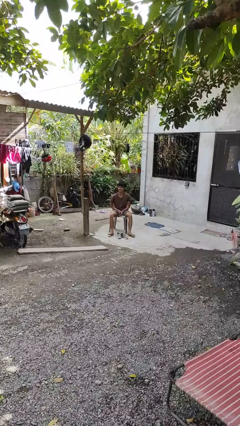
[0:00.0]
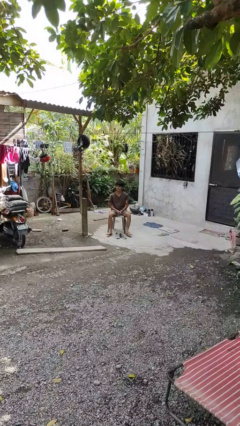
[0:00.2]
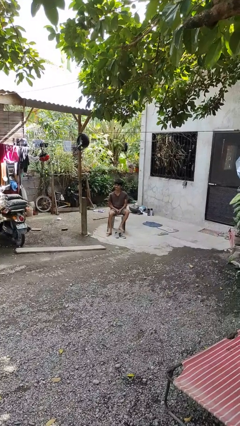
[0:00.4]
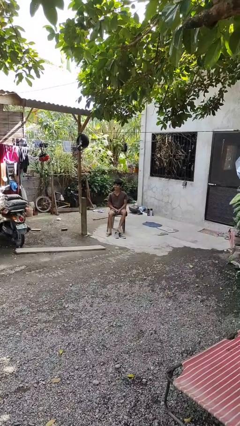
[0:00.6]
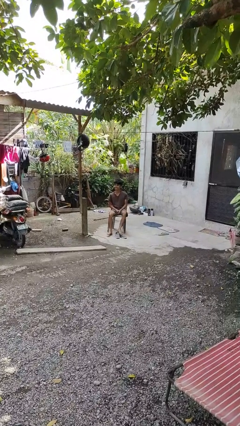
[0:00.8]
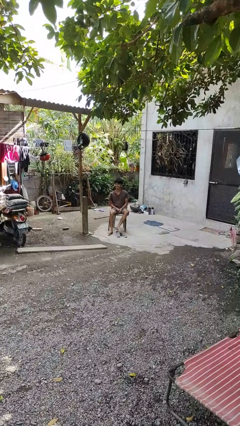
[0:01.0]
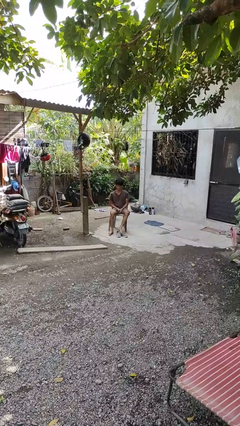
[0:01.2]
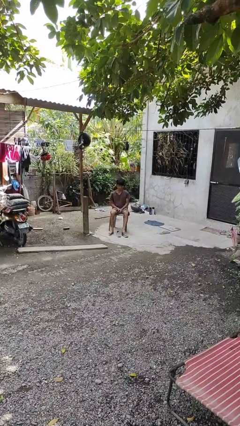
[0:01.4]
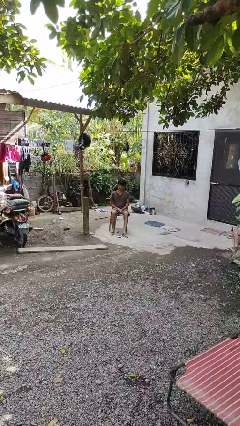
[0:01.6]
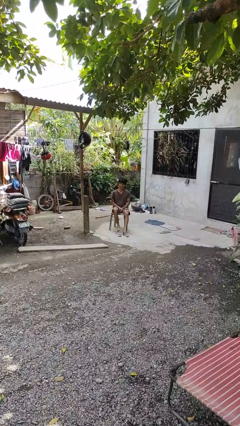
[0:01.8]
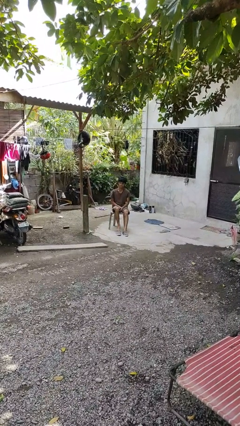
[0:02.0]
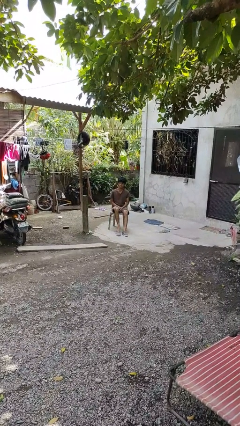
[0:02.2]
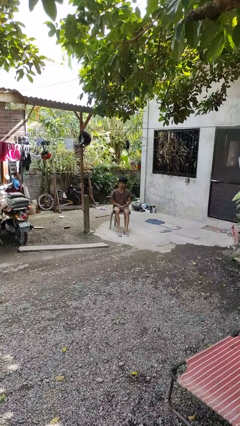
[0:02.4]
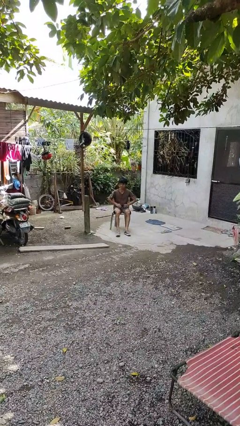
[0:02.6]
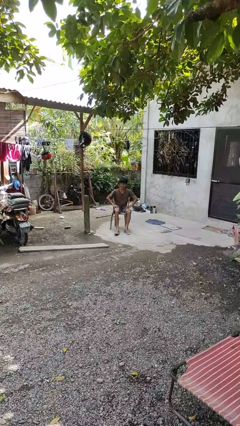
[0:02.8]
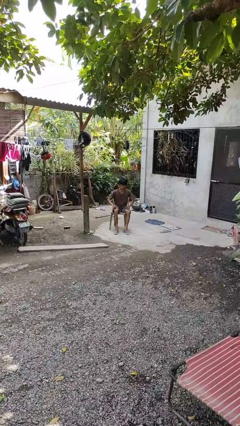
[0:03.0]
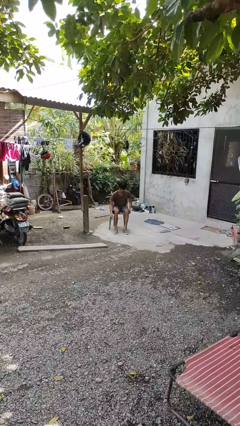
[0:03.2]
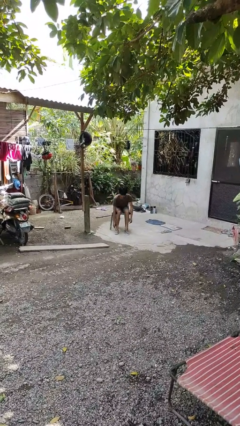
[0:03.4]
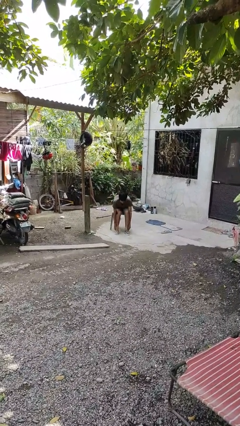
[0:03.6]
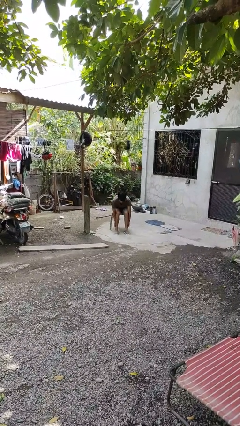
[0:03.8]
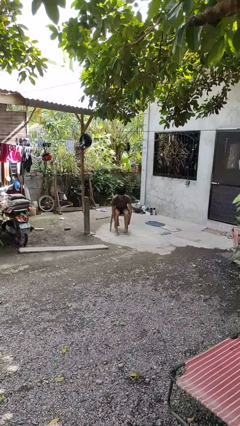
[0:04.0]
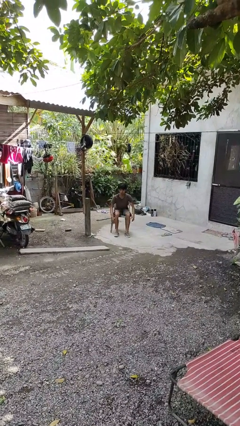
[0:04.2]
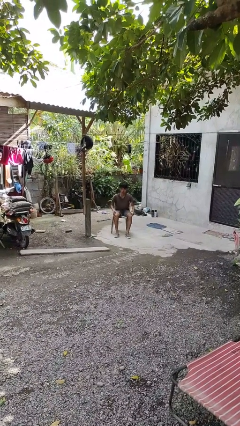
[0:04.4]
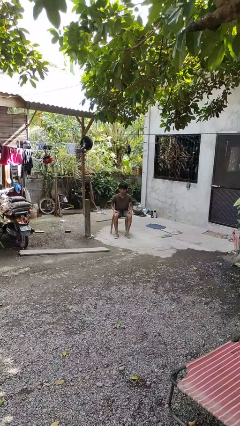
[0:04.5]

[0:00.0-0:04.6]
person puts on shoes

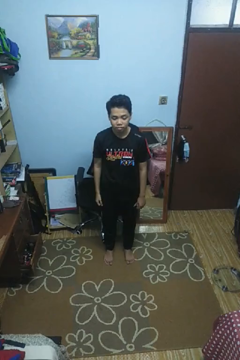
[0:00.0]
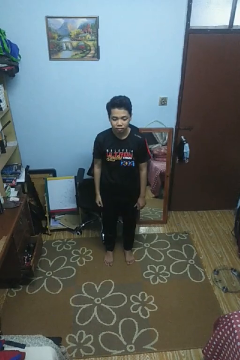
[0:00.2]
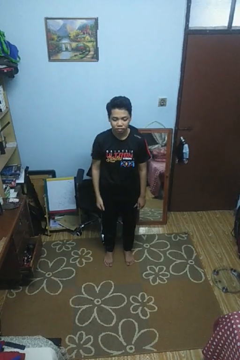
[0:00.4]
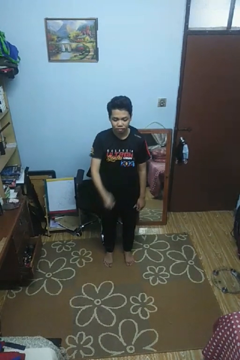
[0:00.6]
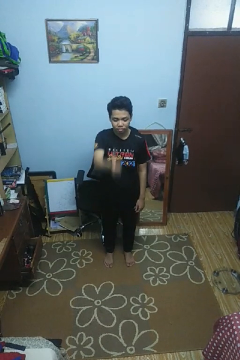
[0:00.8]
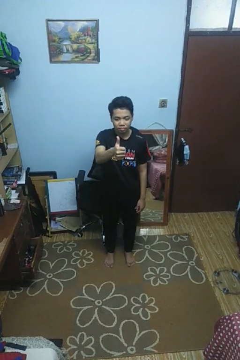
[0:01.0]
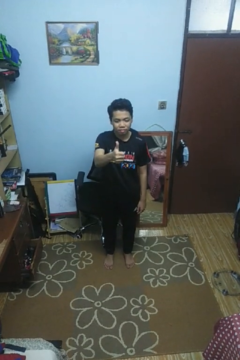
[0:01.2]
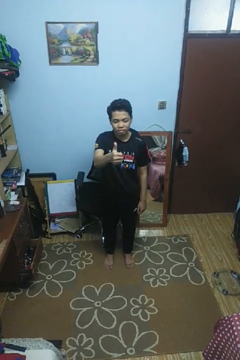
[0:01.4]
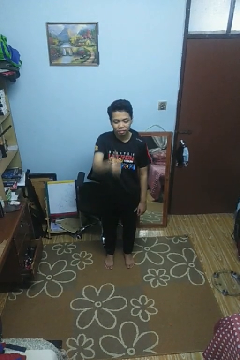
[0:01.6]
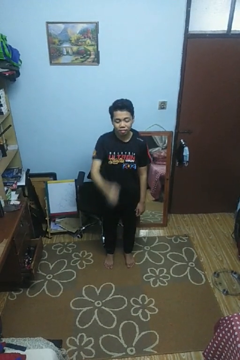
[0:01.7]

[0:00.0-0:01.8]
person gestures thumbs up

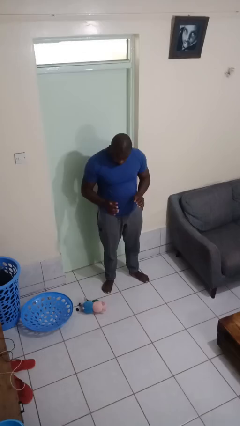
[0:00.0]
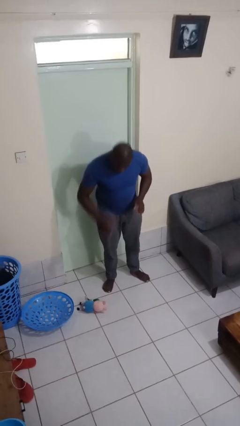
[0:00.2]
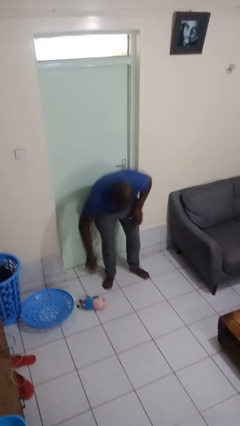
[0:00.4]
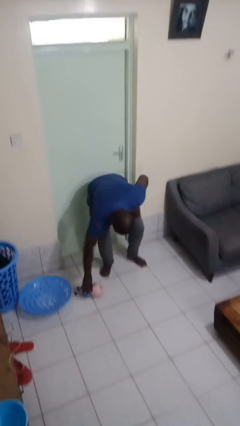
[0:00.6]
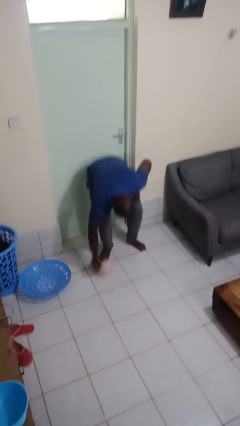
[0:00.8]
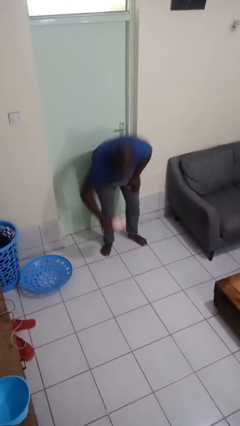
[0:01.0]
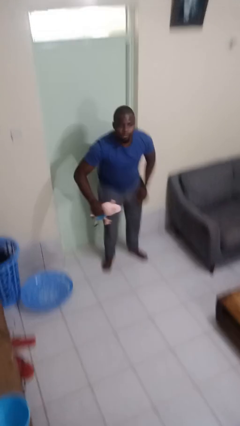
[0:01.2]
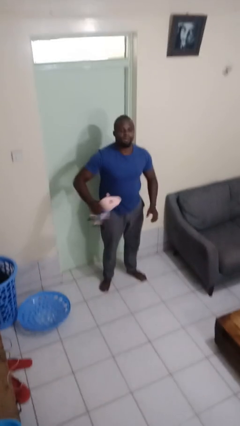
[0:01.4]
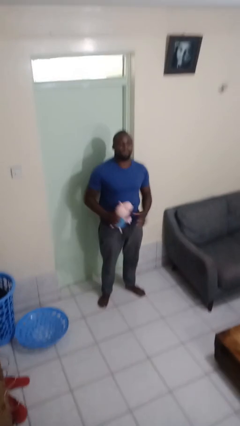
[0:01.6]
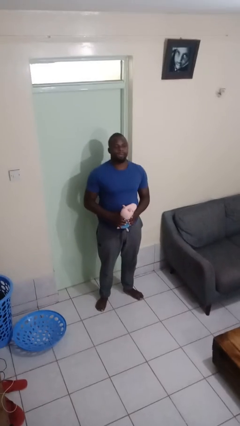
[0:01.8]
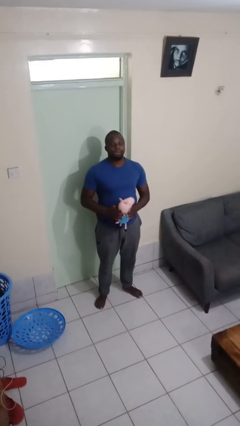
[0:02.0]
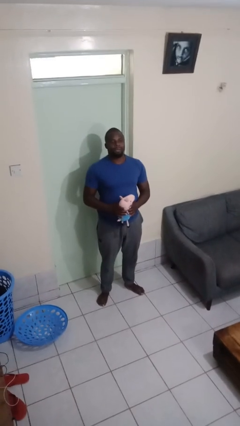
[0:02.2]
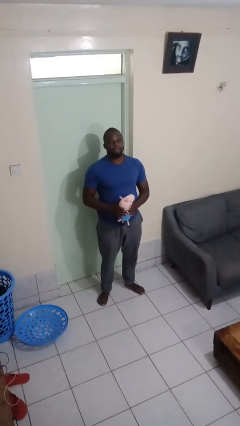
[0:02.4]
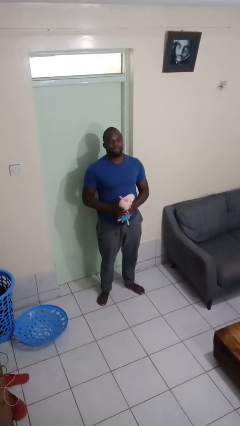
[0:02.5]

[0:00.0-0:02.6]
person picks up object from floor

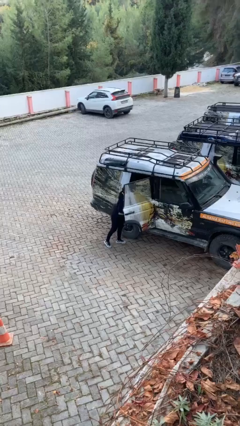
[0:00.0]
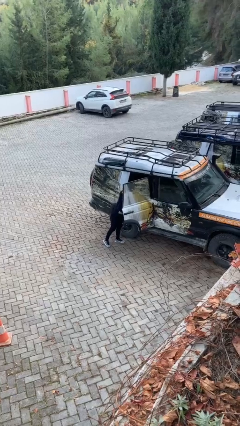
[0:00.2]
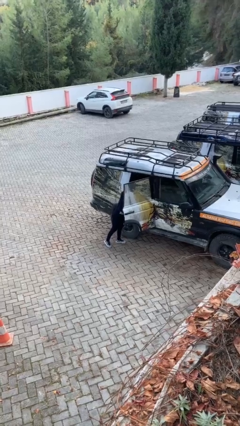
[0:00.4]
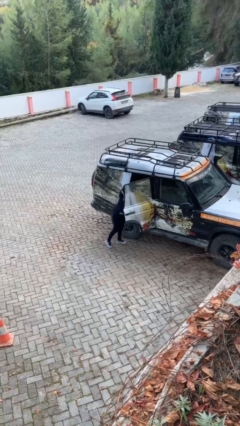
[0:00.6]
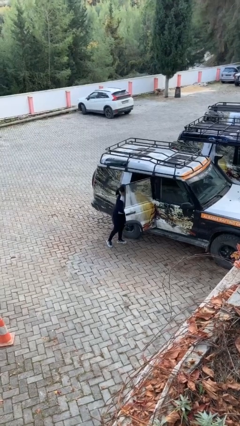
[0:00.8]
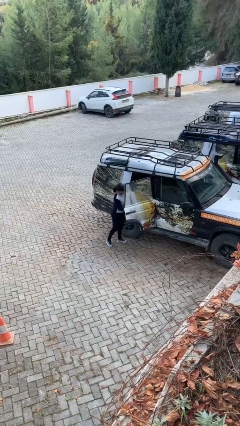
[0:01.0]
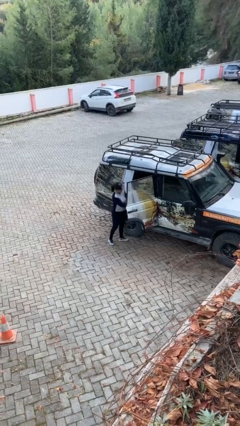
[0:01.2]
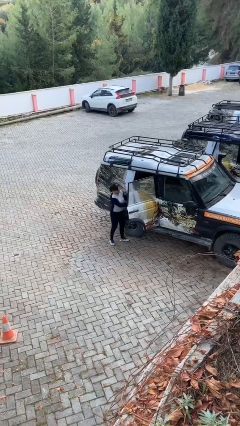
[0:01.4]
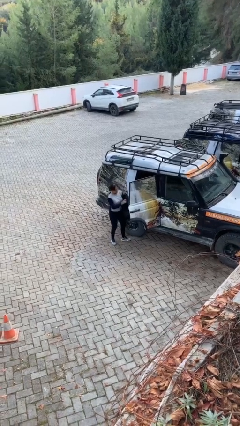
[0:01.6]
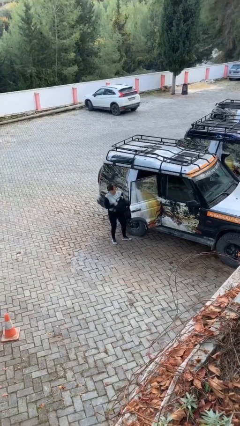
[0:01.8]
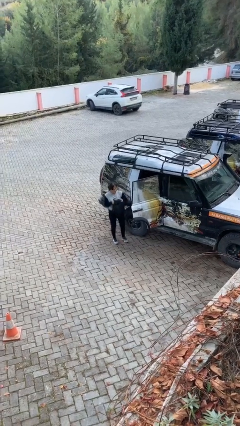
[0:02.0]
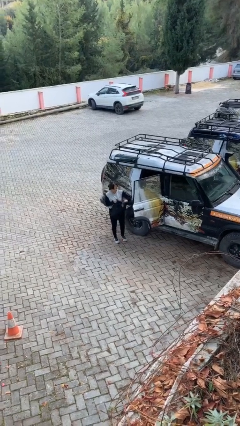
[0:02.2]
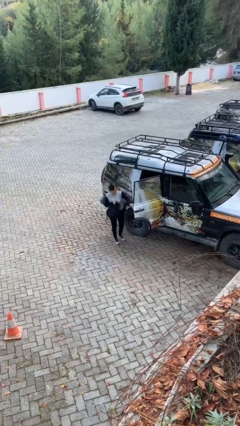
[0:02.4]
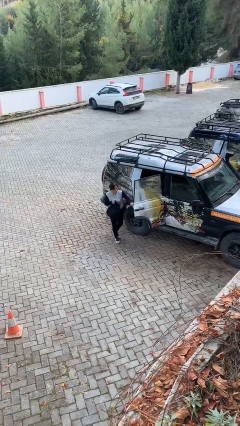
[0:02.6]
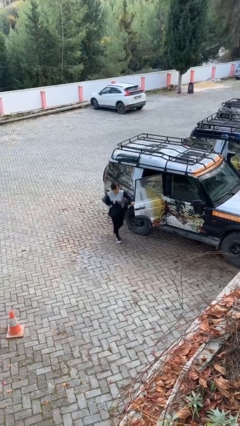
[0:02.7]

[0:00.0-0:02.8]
person unloads car

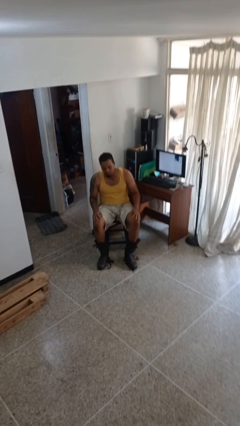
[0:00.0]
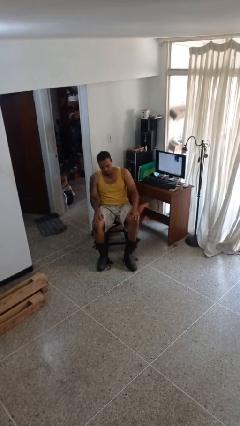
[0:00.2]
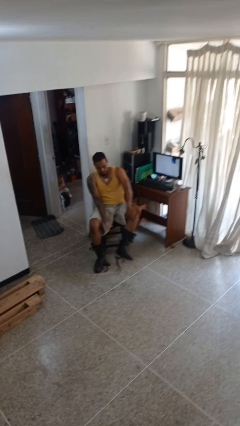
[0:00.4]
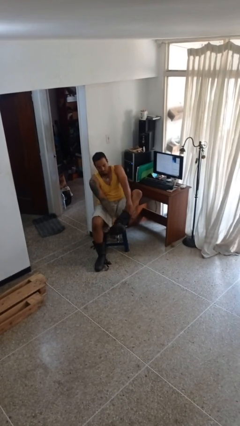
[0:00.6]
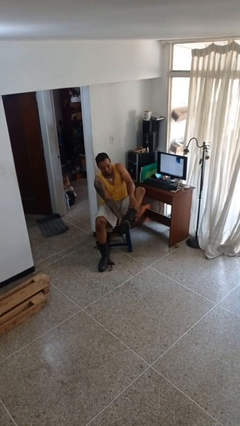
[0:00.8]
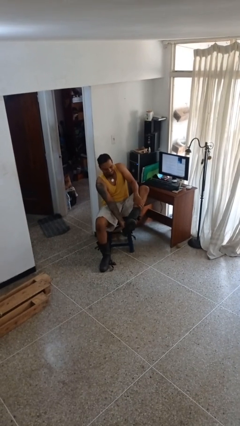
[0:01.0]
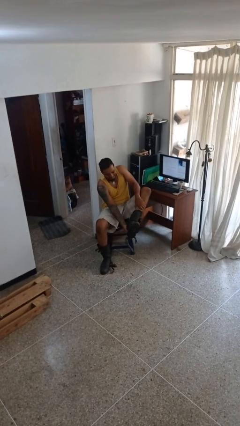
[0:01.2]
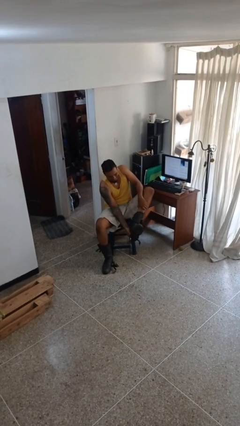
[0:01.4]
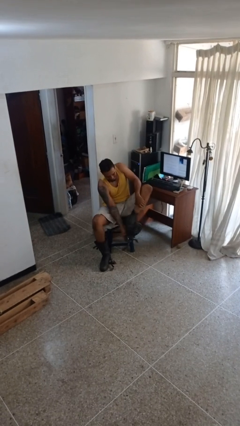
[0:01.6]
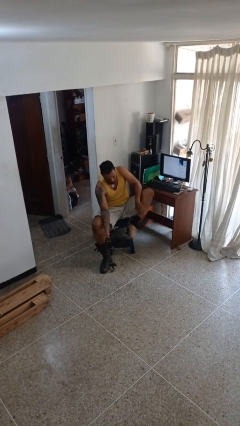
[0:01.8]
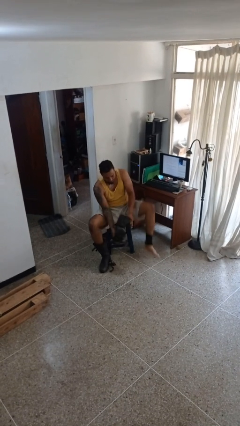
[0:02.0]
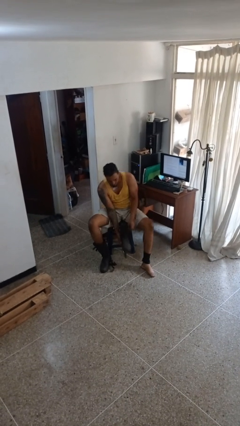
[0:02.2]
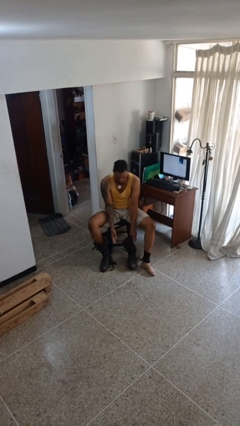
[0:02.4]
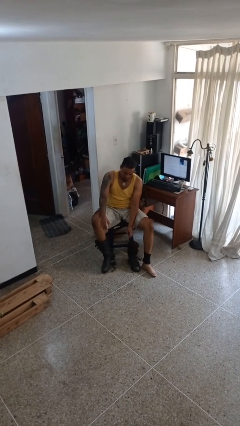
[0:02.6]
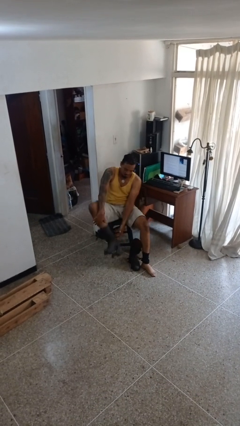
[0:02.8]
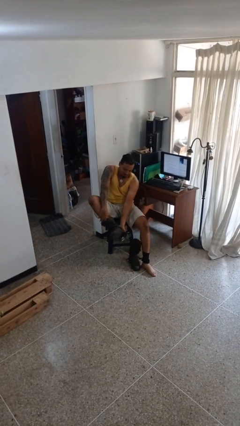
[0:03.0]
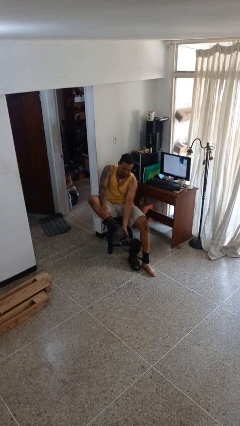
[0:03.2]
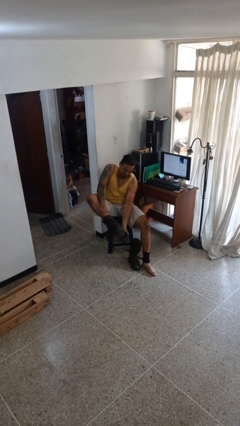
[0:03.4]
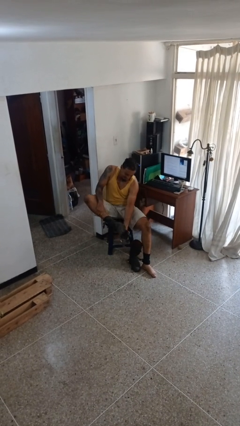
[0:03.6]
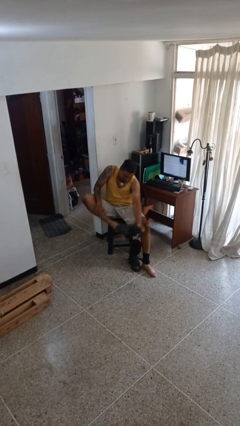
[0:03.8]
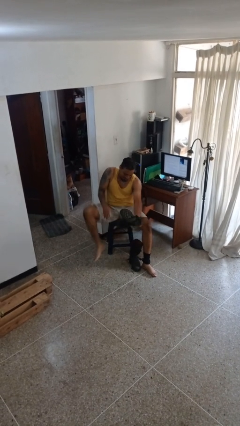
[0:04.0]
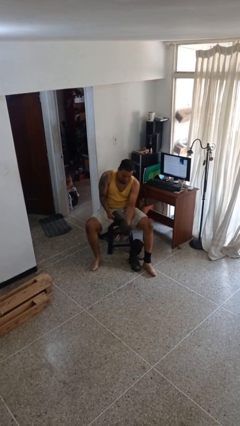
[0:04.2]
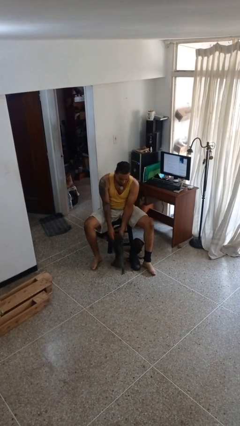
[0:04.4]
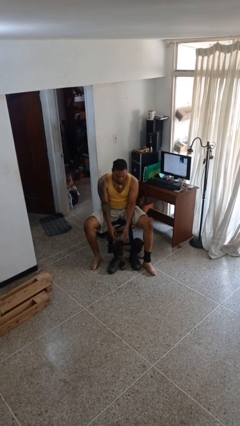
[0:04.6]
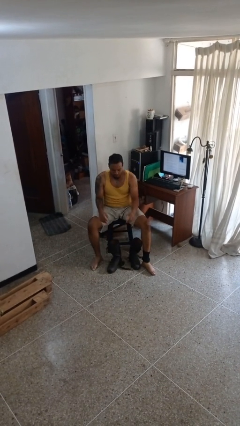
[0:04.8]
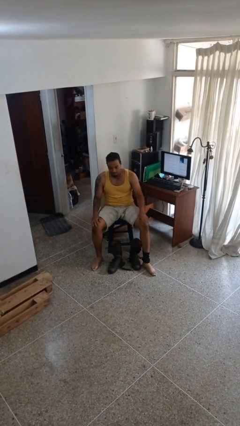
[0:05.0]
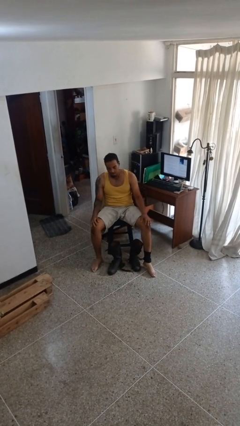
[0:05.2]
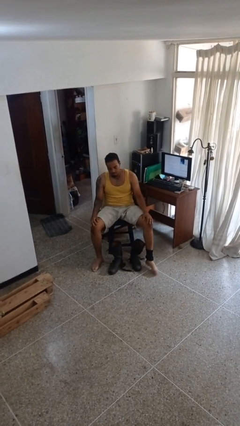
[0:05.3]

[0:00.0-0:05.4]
person takes off boots

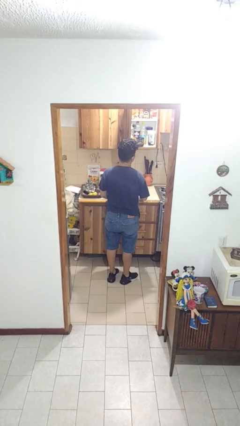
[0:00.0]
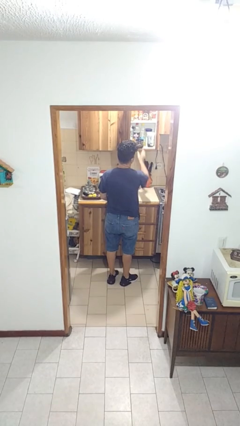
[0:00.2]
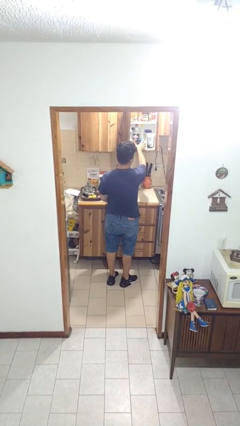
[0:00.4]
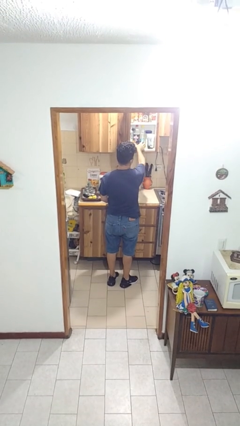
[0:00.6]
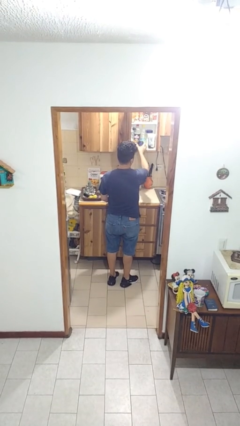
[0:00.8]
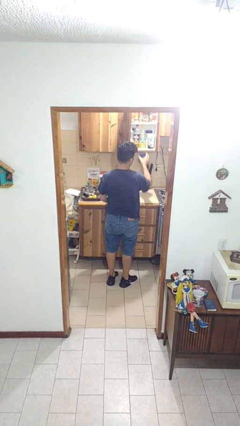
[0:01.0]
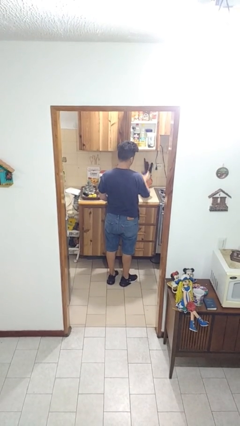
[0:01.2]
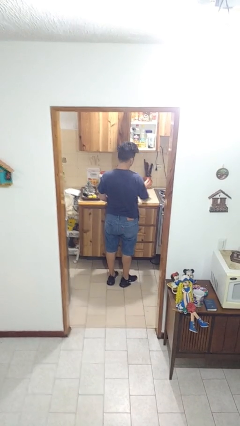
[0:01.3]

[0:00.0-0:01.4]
person takes object from cabinet
